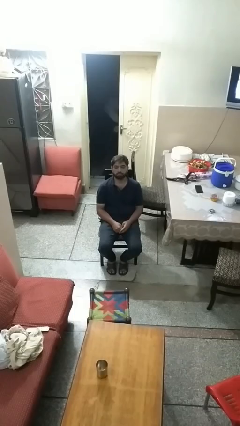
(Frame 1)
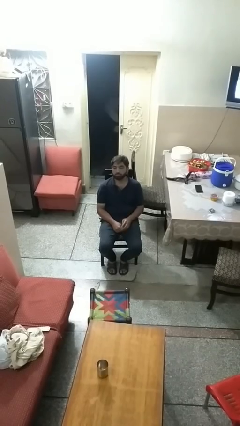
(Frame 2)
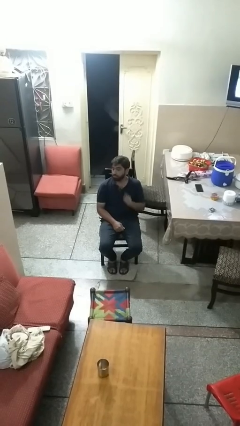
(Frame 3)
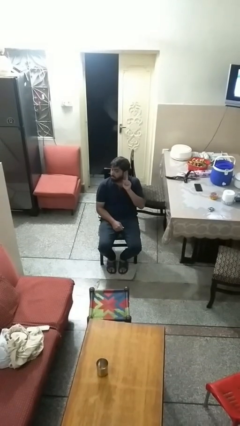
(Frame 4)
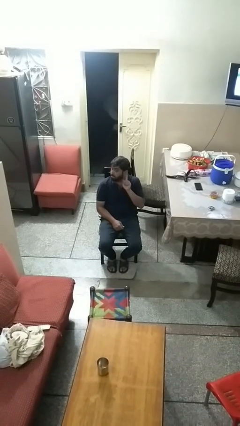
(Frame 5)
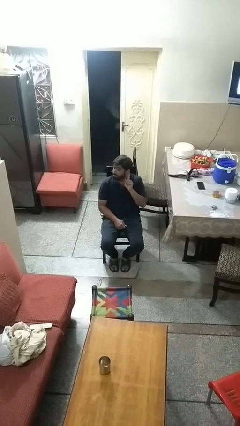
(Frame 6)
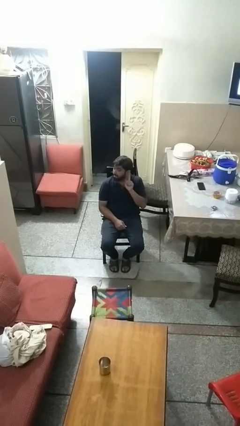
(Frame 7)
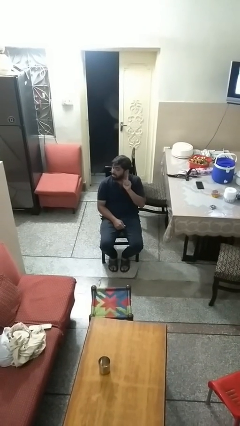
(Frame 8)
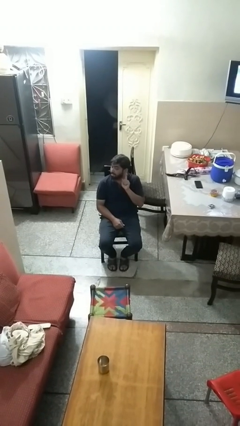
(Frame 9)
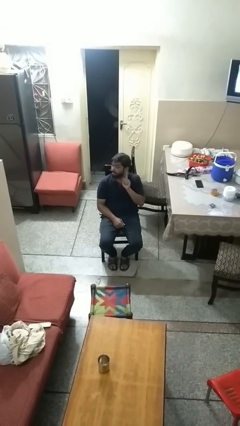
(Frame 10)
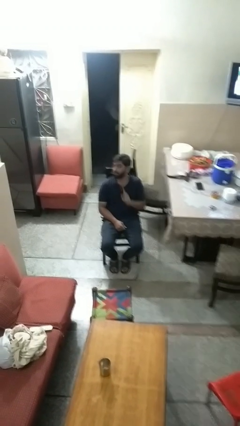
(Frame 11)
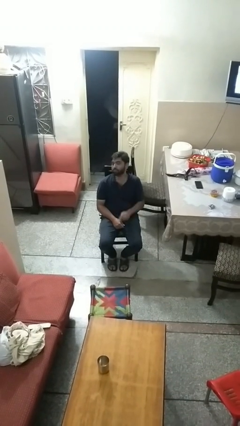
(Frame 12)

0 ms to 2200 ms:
person gestures listen closely

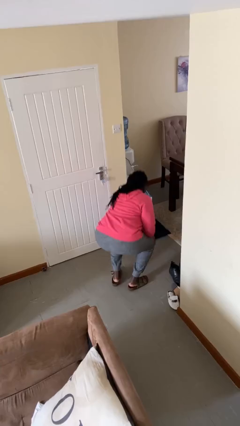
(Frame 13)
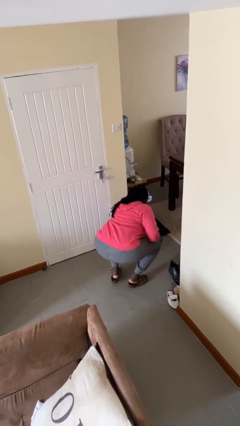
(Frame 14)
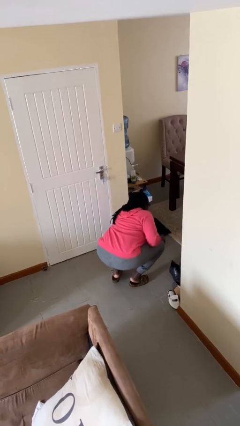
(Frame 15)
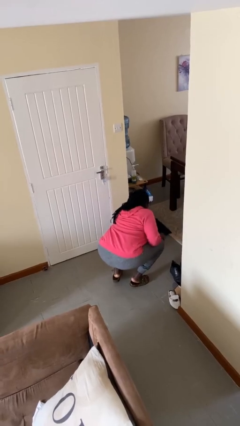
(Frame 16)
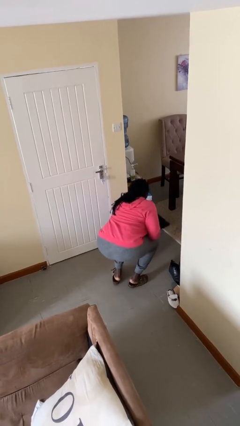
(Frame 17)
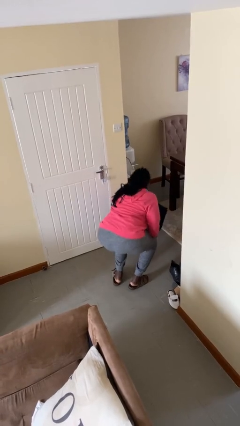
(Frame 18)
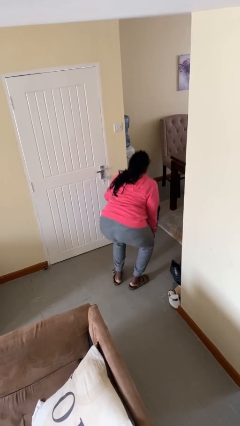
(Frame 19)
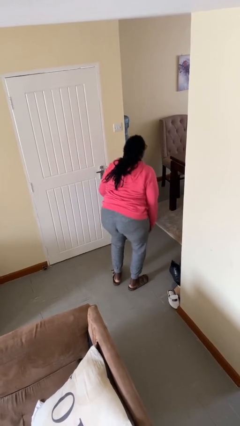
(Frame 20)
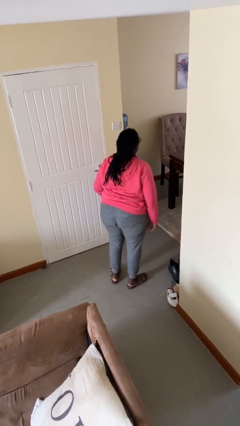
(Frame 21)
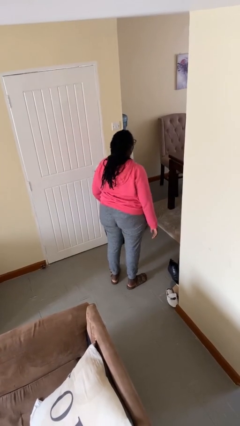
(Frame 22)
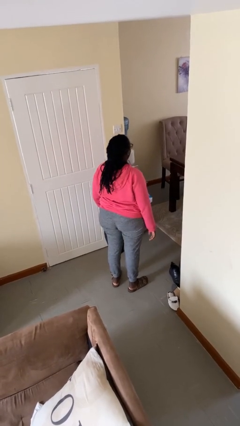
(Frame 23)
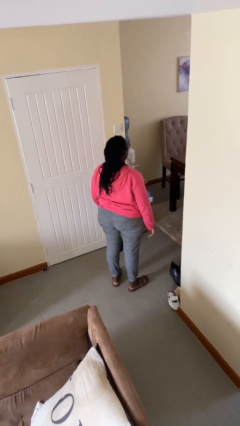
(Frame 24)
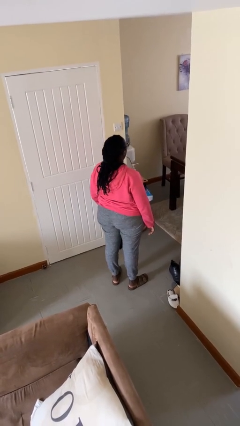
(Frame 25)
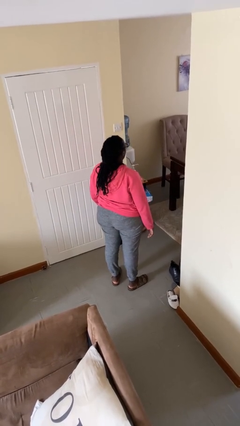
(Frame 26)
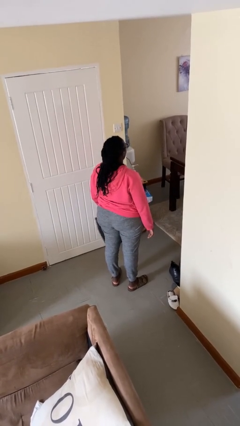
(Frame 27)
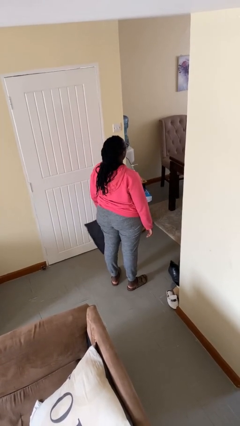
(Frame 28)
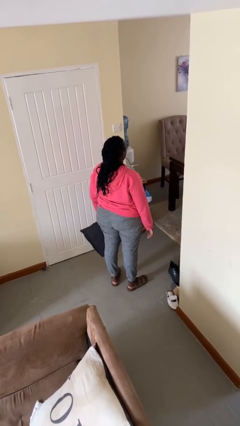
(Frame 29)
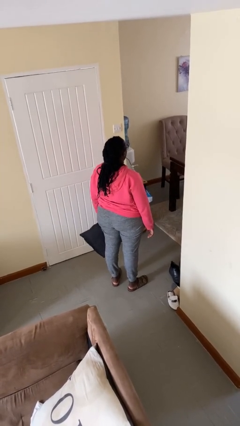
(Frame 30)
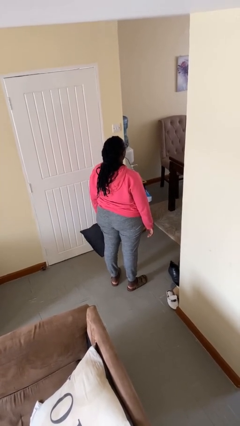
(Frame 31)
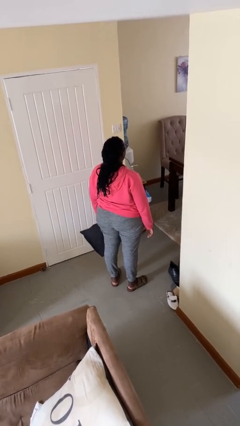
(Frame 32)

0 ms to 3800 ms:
person picks up object from floor

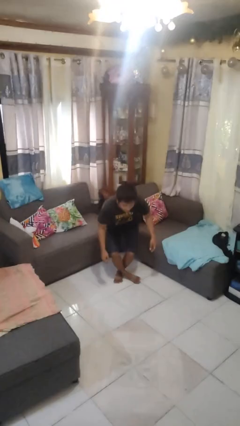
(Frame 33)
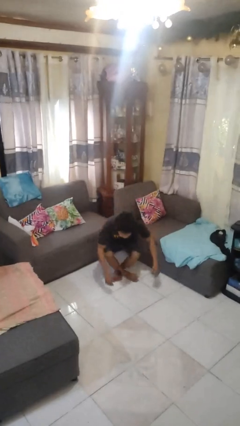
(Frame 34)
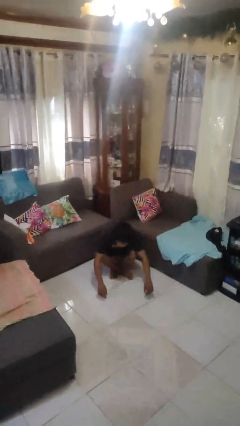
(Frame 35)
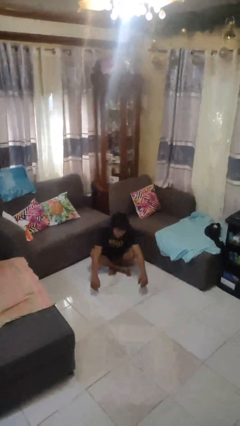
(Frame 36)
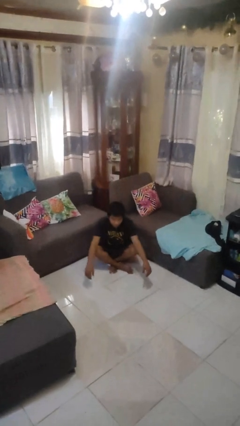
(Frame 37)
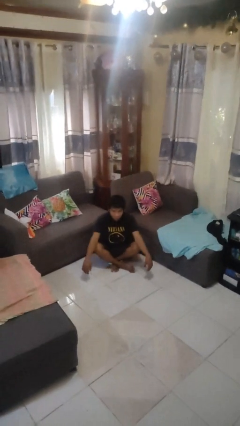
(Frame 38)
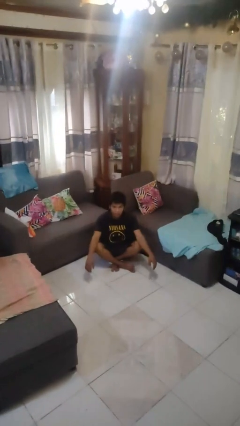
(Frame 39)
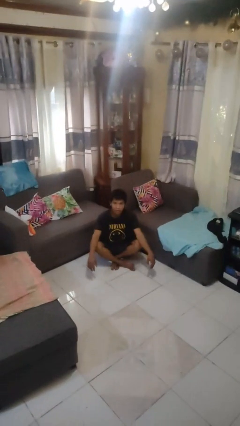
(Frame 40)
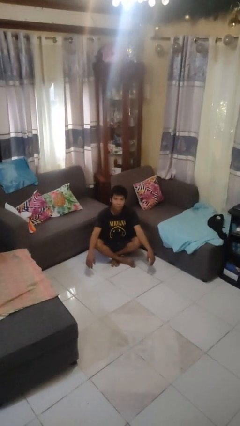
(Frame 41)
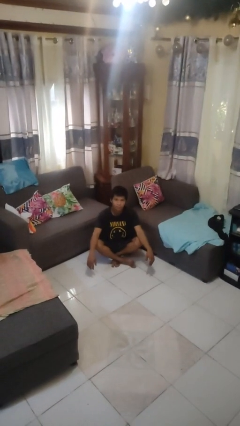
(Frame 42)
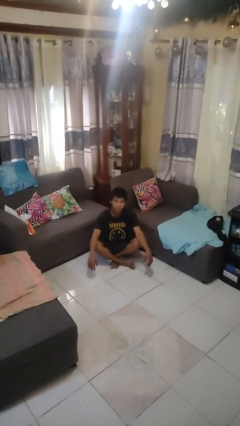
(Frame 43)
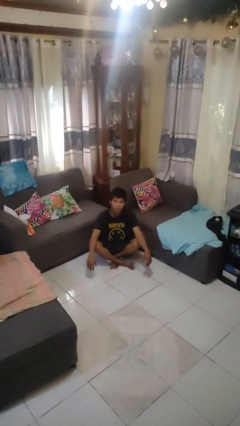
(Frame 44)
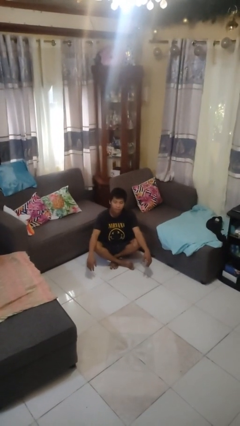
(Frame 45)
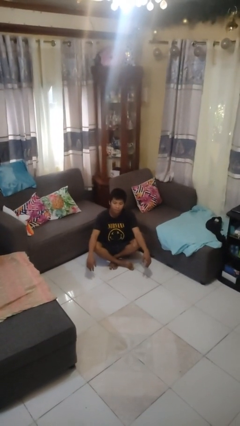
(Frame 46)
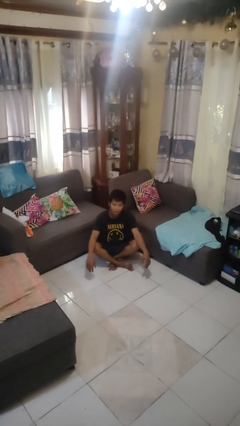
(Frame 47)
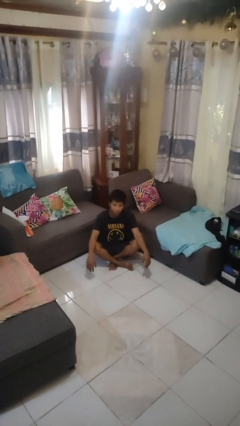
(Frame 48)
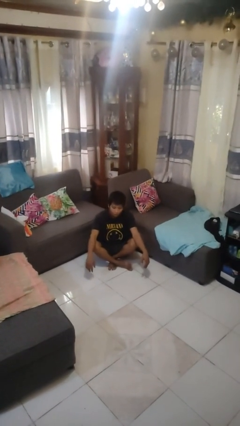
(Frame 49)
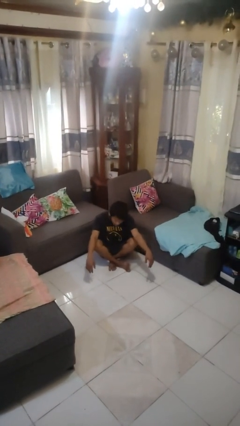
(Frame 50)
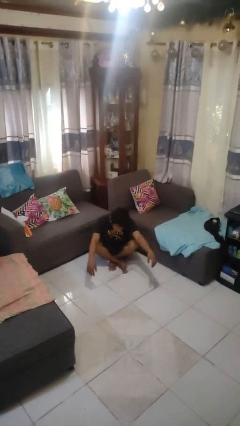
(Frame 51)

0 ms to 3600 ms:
person sits crisscross

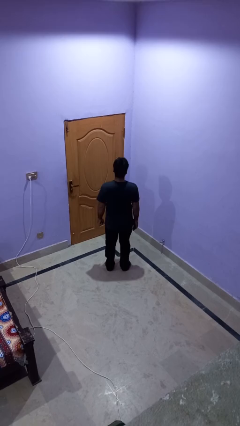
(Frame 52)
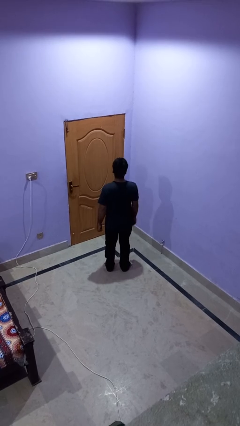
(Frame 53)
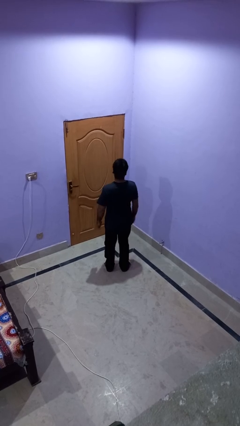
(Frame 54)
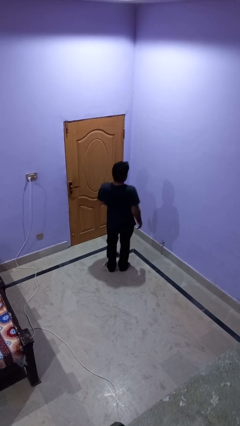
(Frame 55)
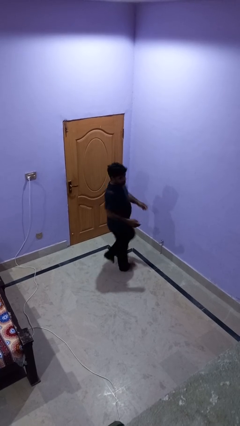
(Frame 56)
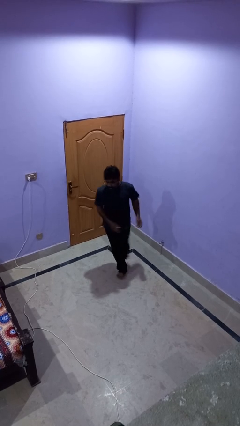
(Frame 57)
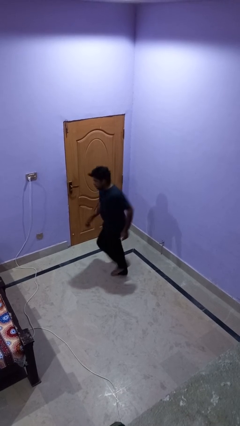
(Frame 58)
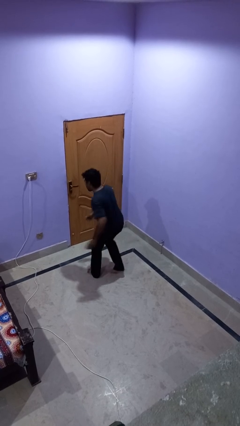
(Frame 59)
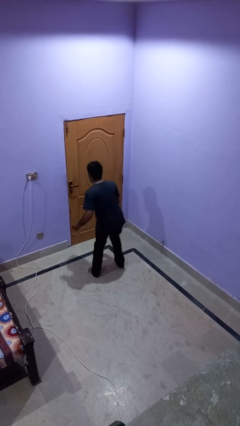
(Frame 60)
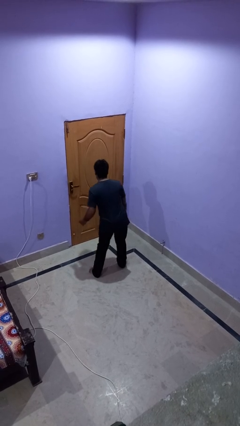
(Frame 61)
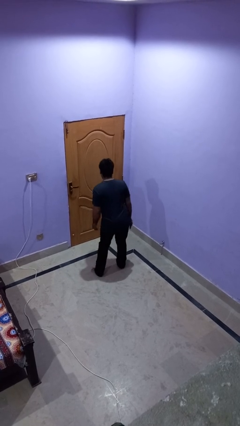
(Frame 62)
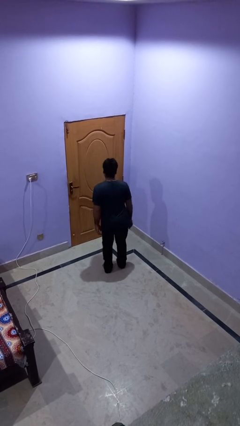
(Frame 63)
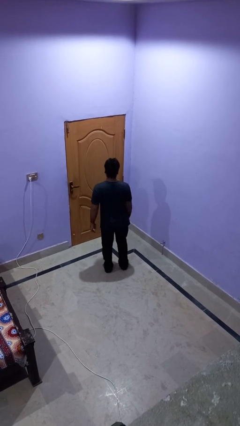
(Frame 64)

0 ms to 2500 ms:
person twirls

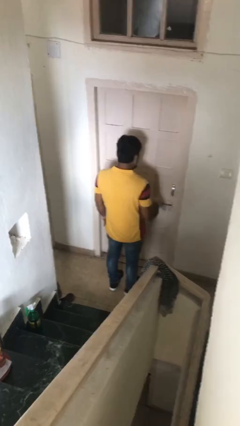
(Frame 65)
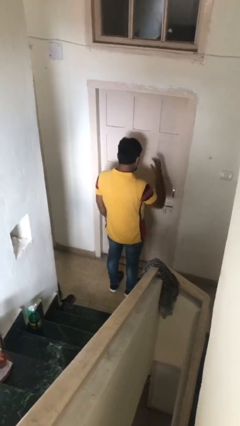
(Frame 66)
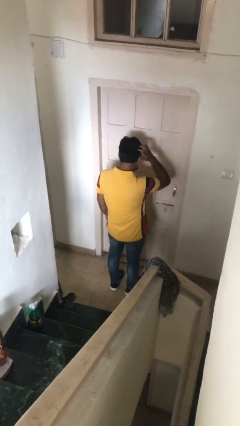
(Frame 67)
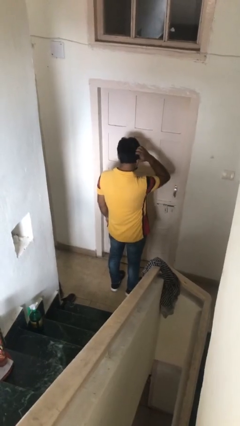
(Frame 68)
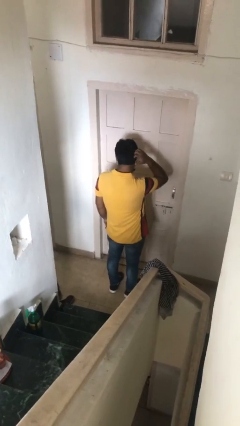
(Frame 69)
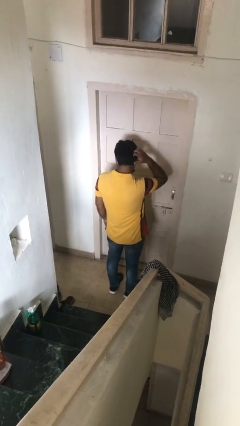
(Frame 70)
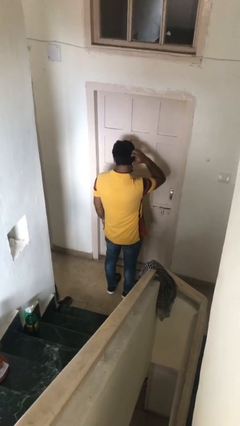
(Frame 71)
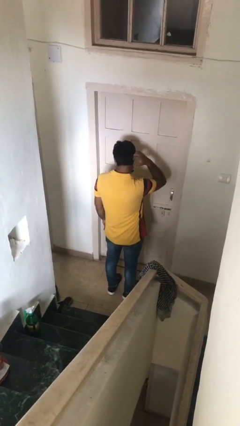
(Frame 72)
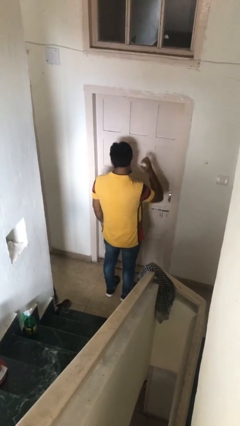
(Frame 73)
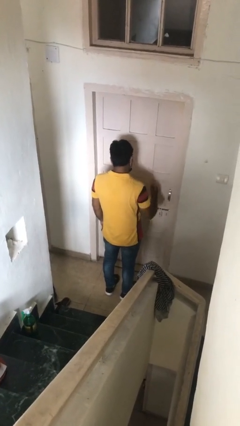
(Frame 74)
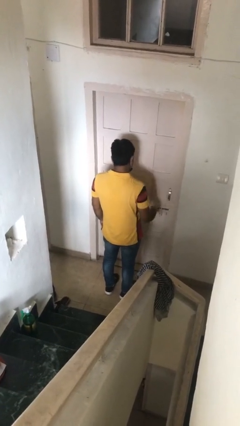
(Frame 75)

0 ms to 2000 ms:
person scratches face

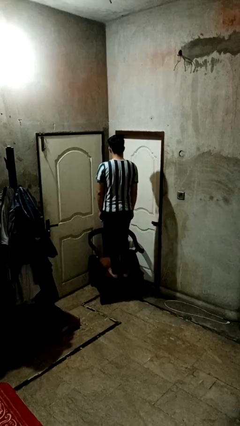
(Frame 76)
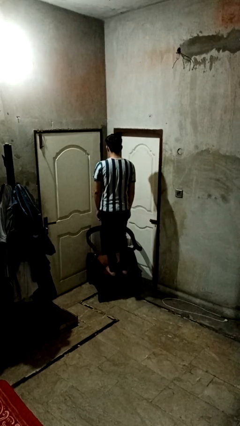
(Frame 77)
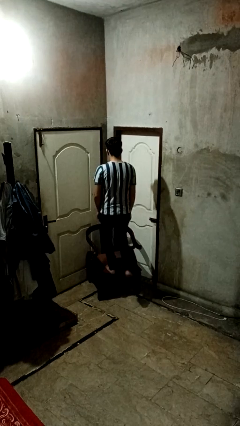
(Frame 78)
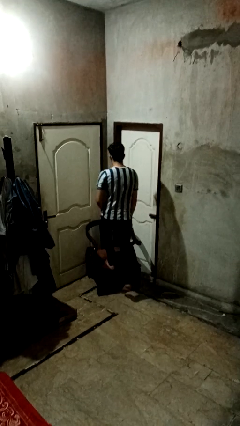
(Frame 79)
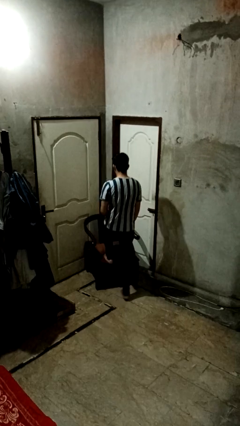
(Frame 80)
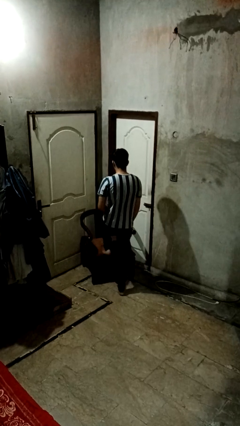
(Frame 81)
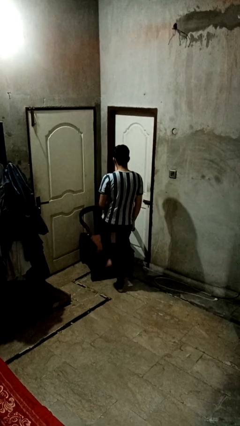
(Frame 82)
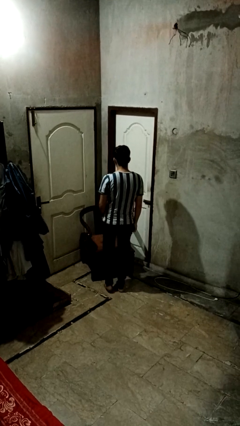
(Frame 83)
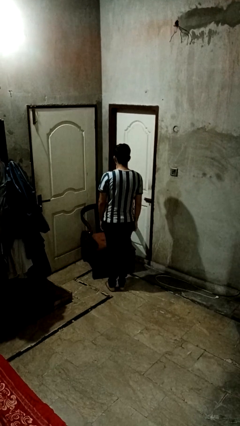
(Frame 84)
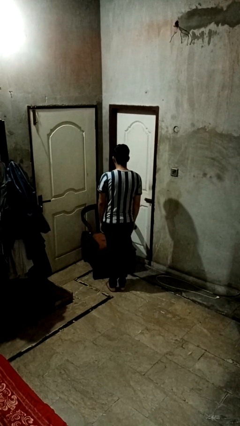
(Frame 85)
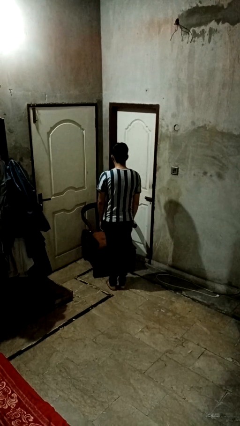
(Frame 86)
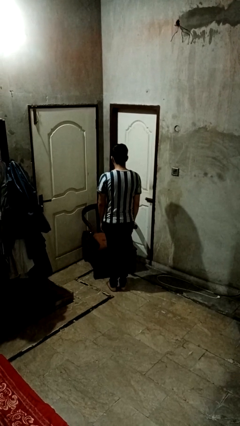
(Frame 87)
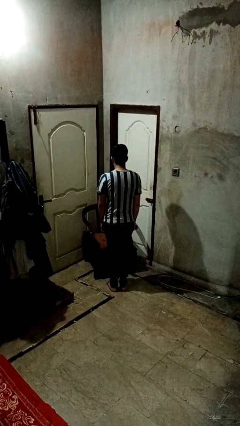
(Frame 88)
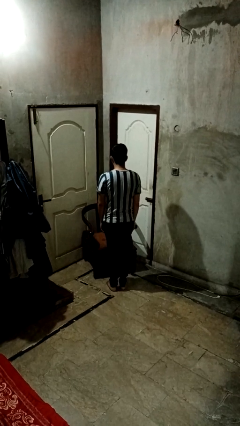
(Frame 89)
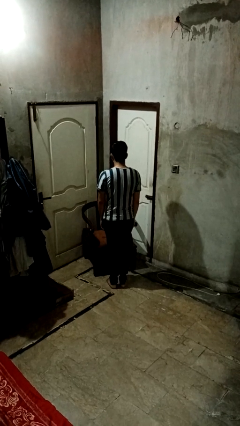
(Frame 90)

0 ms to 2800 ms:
person climbs off couch

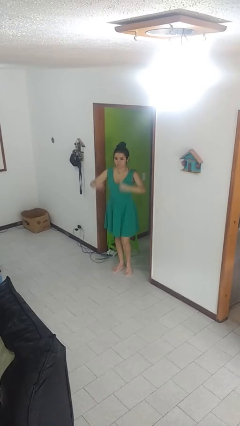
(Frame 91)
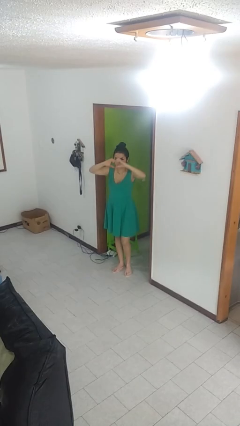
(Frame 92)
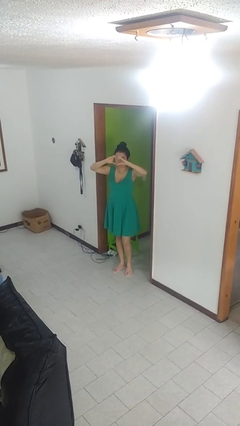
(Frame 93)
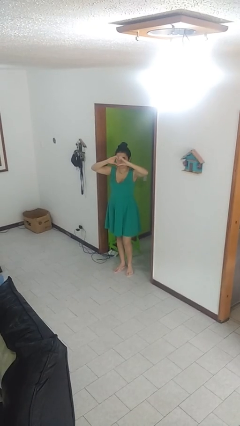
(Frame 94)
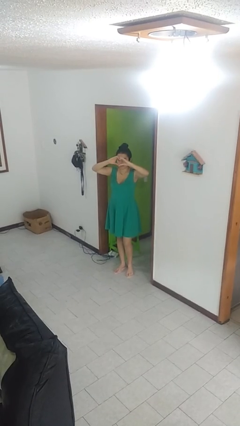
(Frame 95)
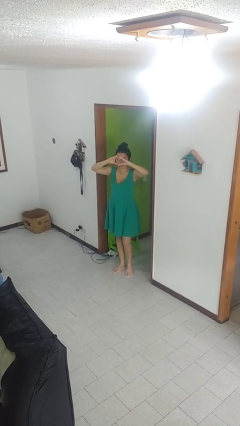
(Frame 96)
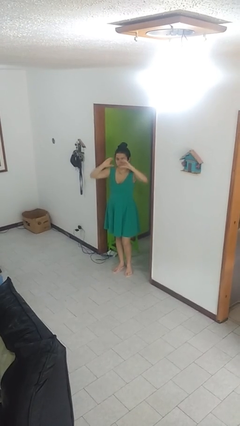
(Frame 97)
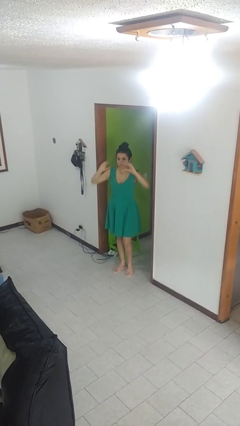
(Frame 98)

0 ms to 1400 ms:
person gestures heart
